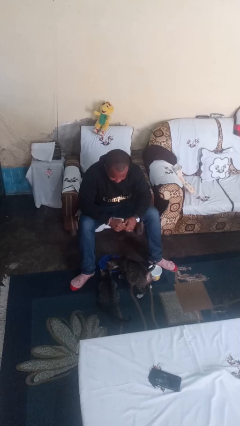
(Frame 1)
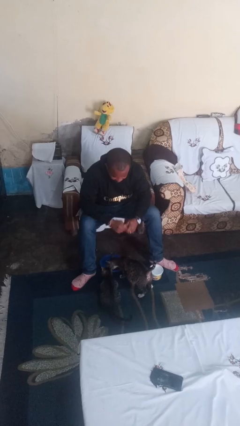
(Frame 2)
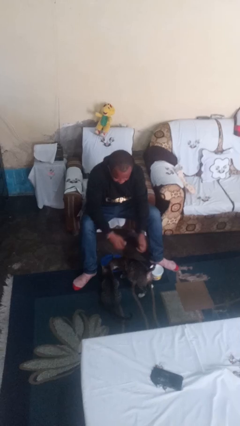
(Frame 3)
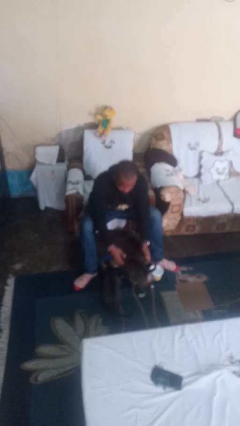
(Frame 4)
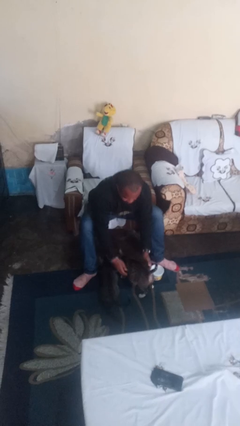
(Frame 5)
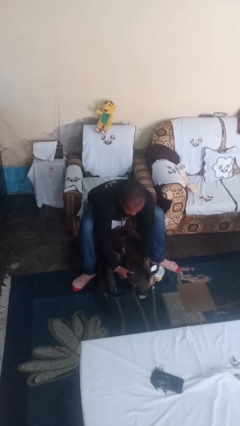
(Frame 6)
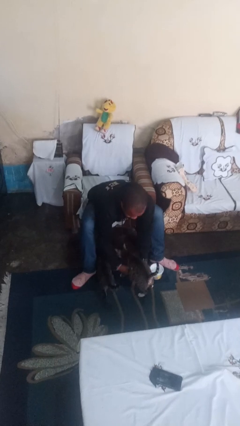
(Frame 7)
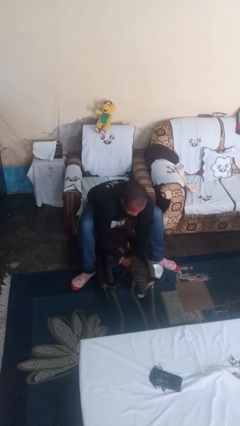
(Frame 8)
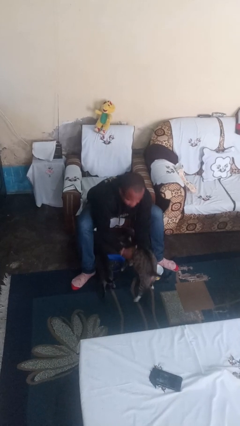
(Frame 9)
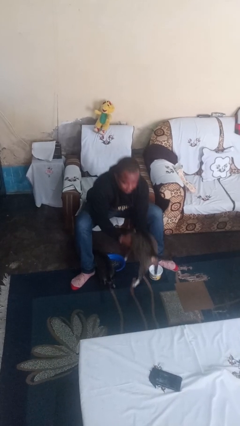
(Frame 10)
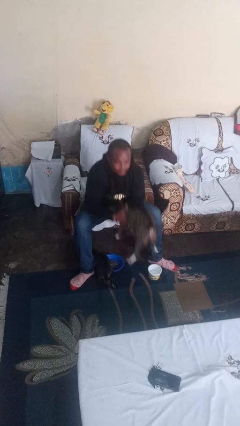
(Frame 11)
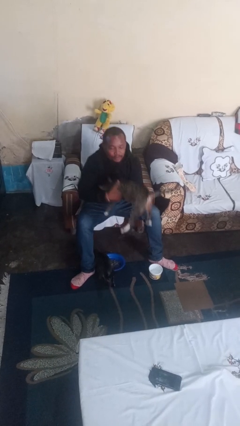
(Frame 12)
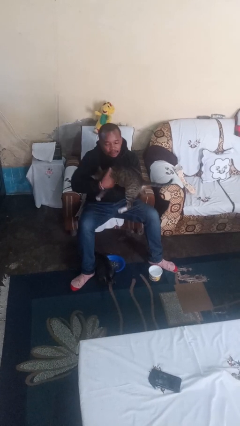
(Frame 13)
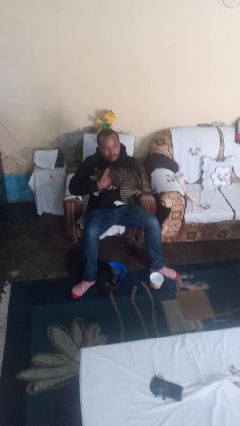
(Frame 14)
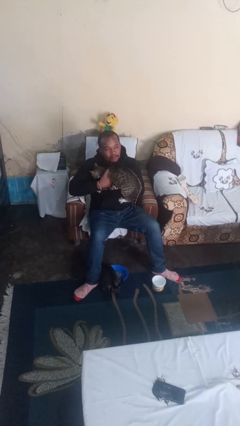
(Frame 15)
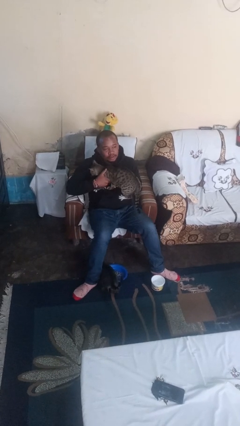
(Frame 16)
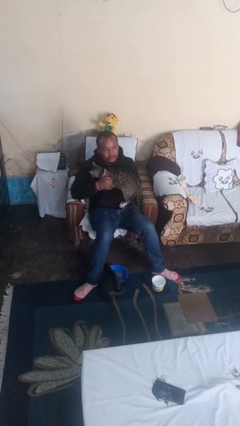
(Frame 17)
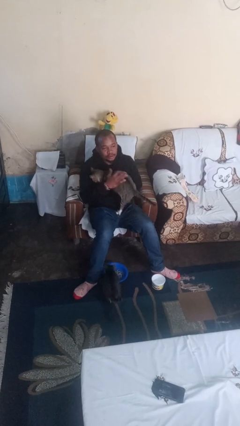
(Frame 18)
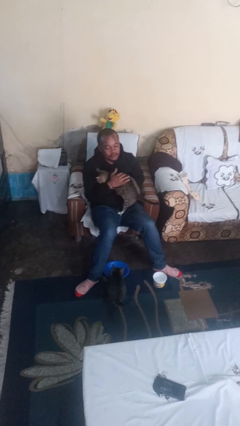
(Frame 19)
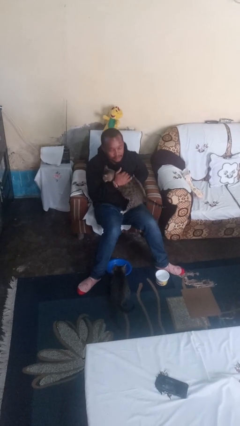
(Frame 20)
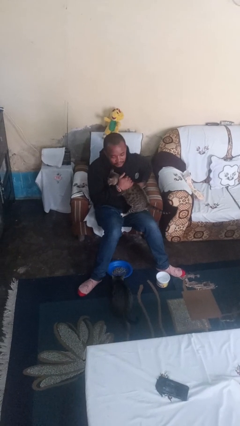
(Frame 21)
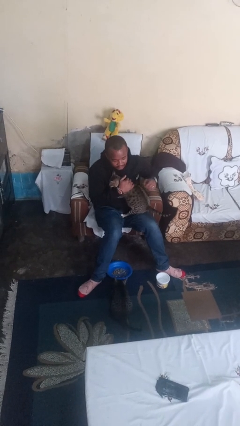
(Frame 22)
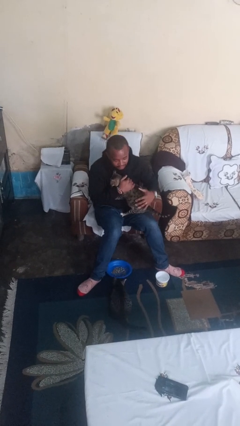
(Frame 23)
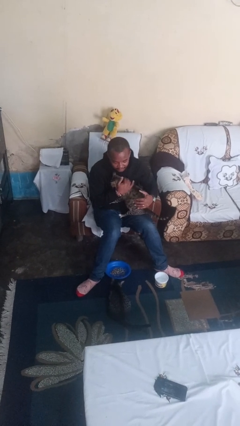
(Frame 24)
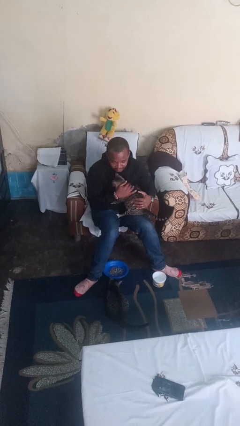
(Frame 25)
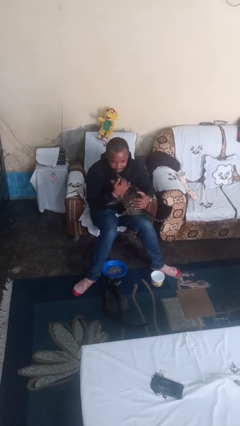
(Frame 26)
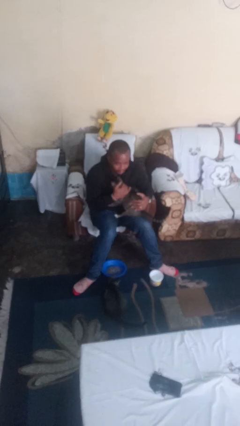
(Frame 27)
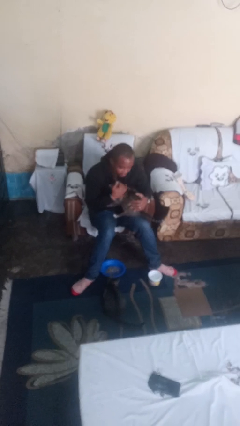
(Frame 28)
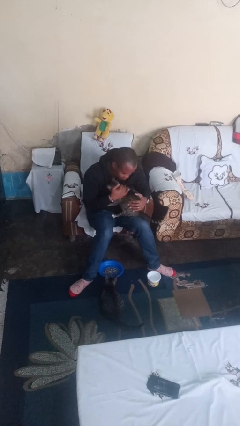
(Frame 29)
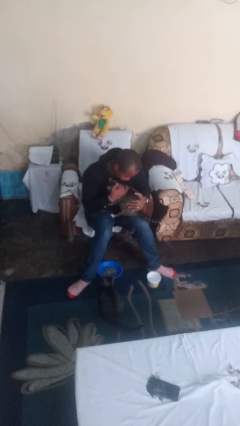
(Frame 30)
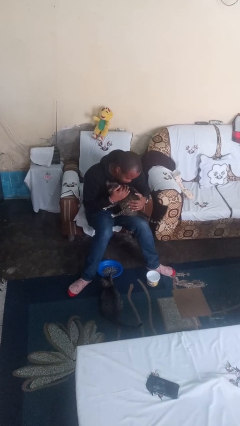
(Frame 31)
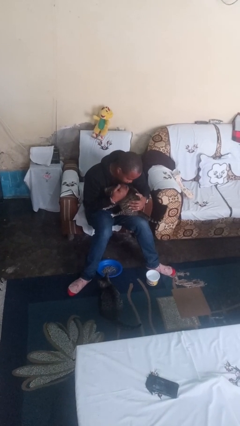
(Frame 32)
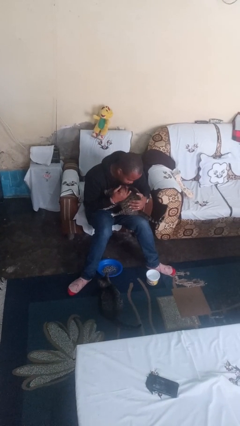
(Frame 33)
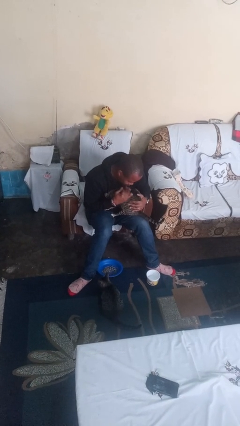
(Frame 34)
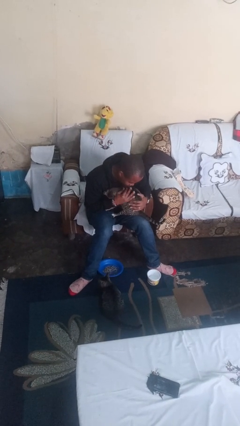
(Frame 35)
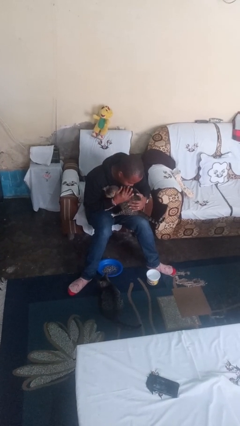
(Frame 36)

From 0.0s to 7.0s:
person hugs cat

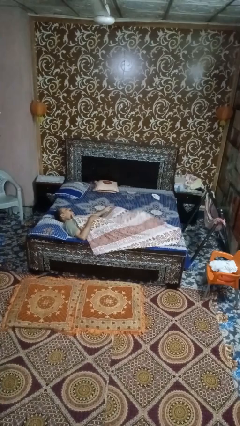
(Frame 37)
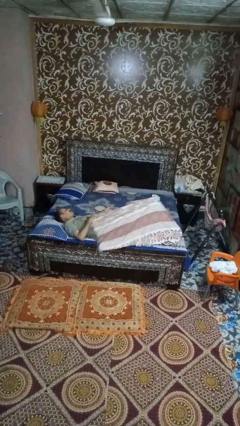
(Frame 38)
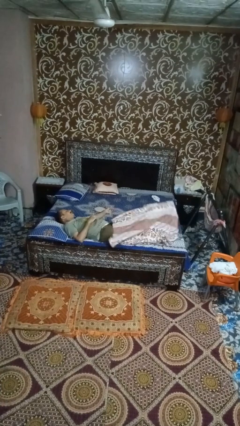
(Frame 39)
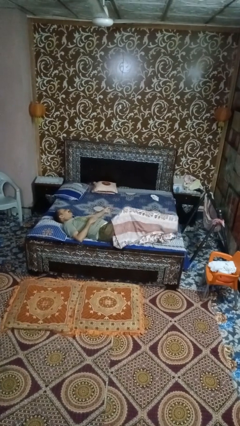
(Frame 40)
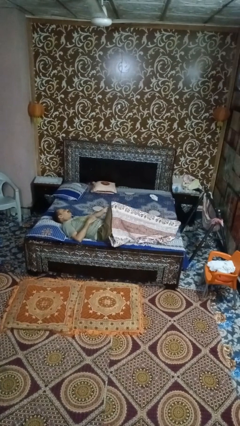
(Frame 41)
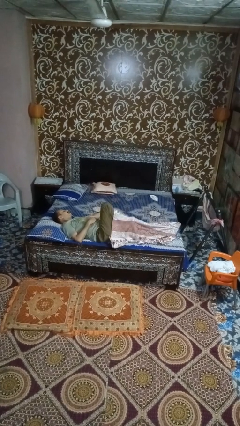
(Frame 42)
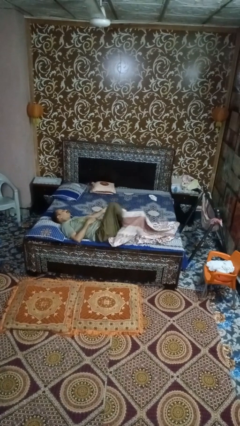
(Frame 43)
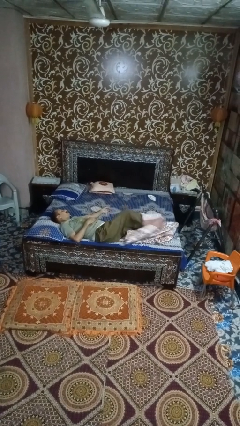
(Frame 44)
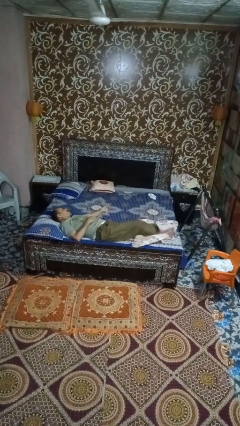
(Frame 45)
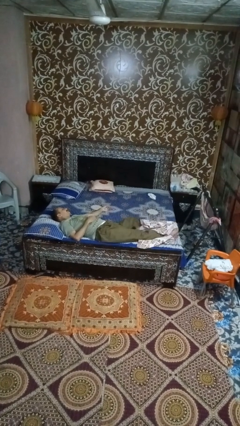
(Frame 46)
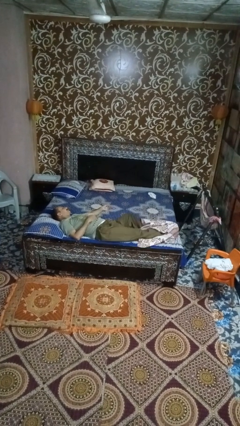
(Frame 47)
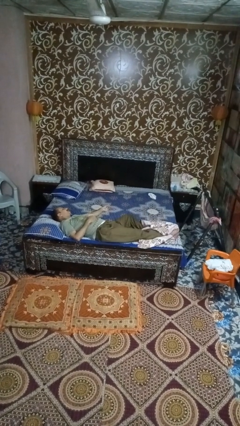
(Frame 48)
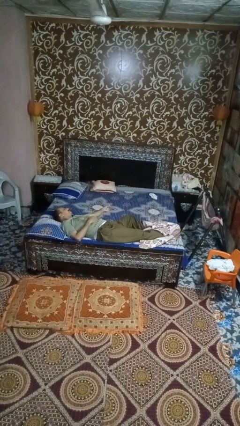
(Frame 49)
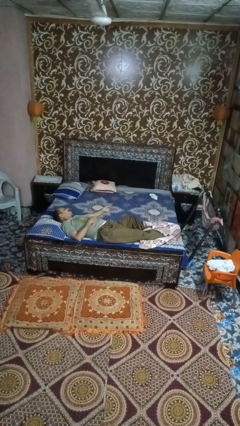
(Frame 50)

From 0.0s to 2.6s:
person uncovers with bedsheets

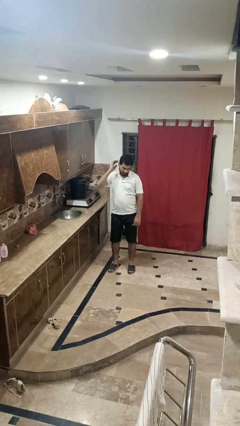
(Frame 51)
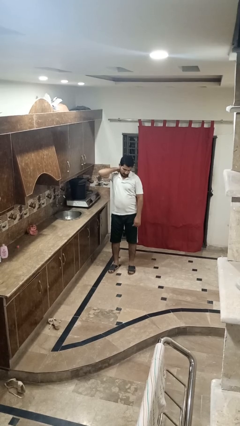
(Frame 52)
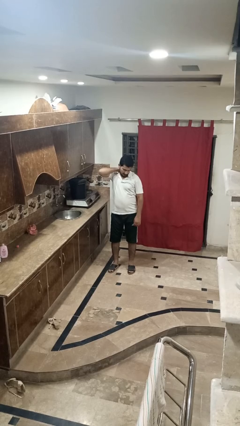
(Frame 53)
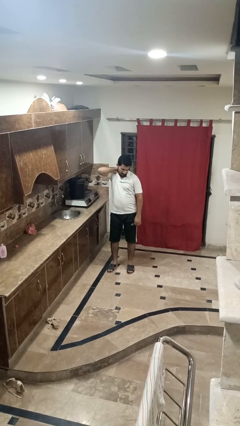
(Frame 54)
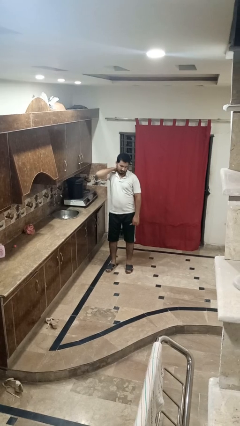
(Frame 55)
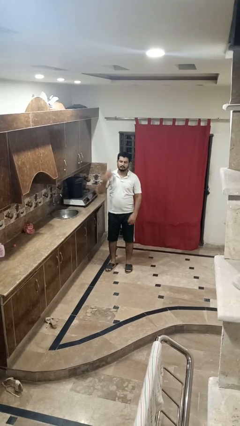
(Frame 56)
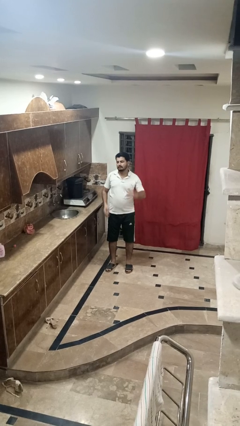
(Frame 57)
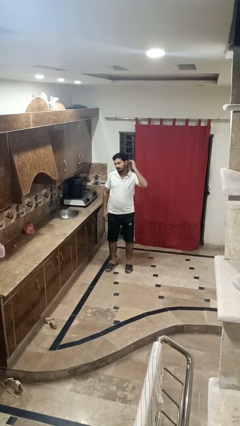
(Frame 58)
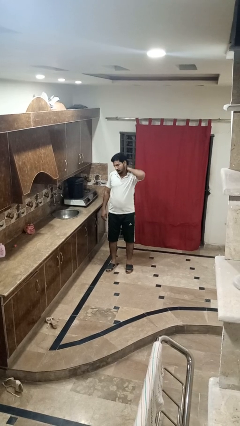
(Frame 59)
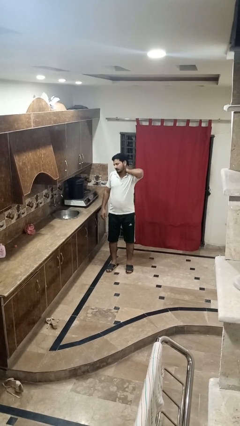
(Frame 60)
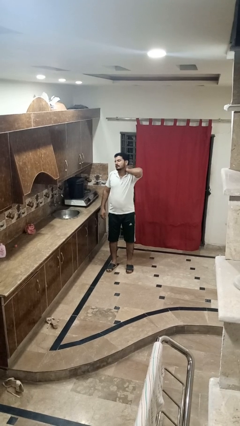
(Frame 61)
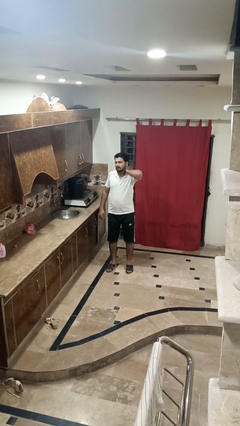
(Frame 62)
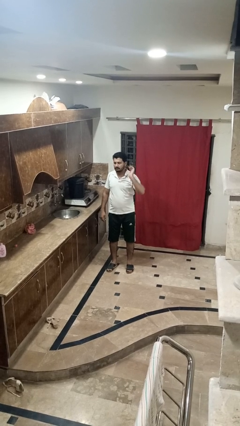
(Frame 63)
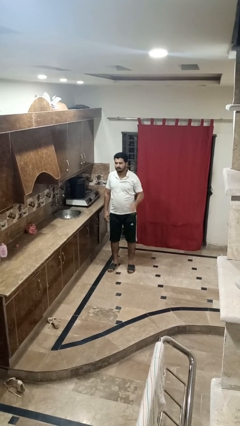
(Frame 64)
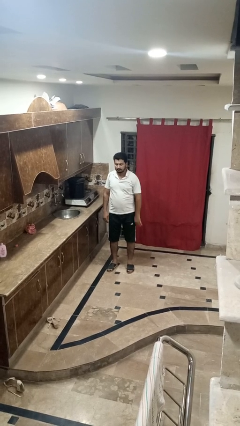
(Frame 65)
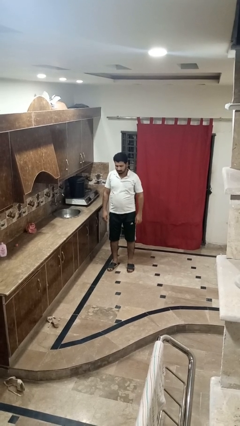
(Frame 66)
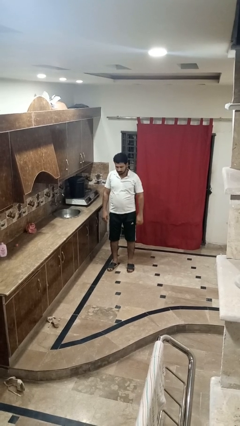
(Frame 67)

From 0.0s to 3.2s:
person rubs neck

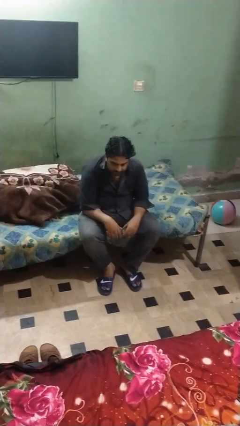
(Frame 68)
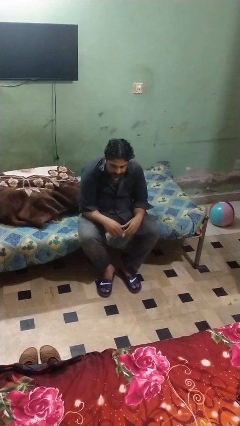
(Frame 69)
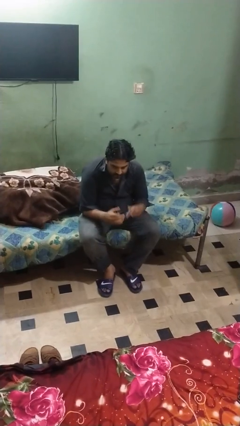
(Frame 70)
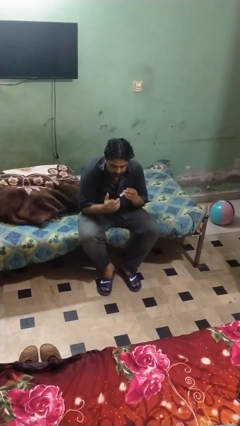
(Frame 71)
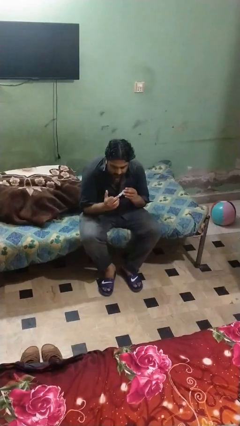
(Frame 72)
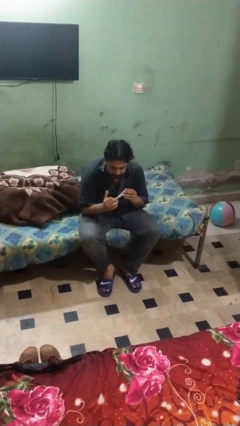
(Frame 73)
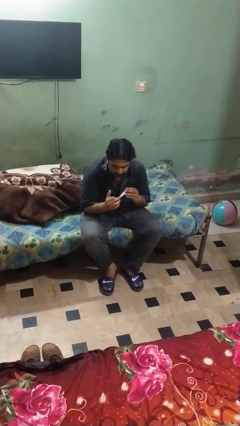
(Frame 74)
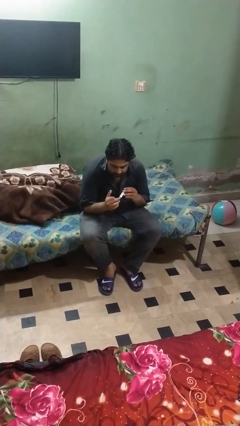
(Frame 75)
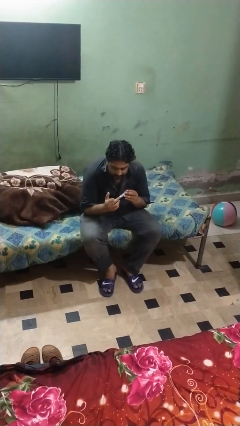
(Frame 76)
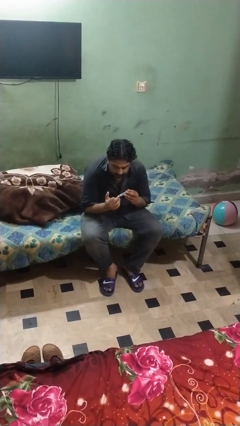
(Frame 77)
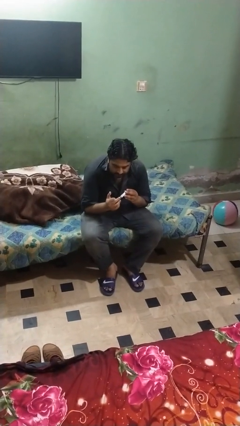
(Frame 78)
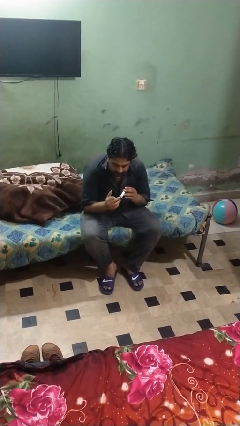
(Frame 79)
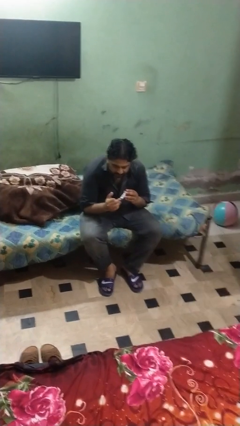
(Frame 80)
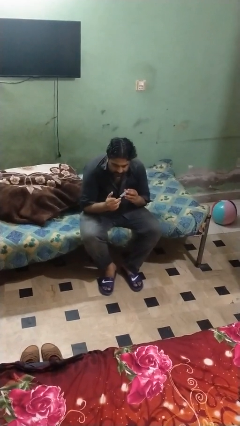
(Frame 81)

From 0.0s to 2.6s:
person clips fingernails

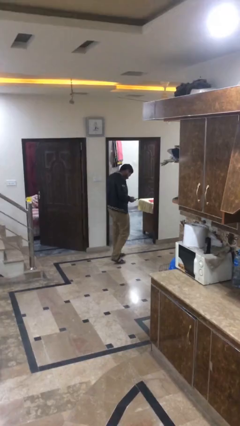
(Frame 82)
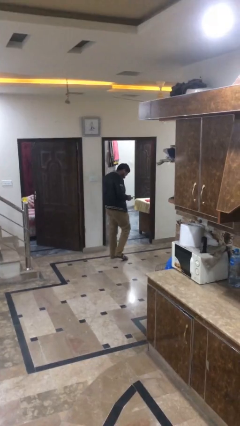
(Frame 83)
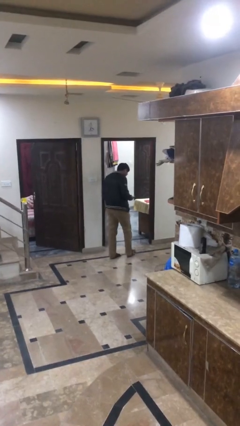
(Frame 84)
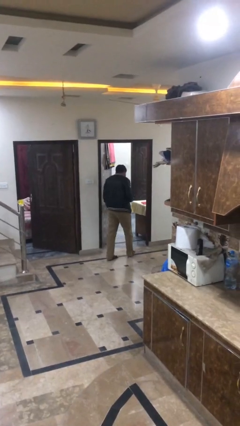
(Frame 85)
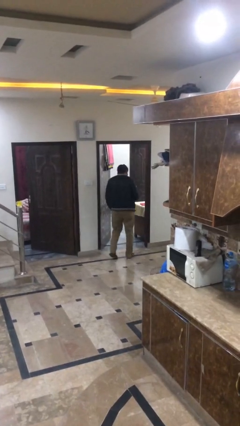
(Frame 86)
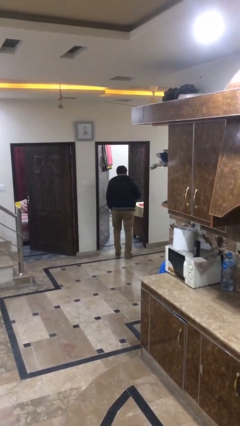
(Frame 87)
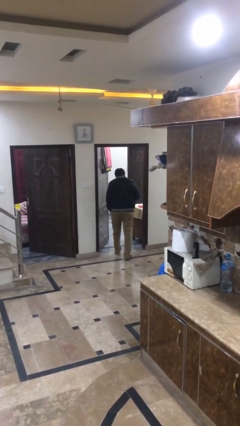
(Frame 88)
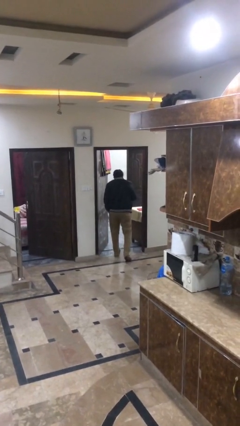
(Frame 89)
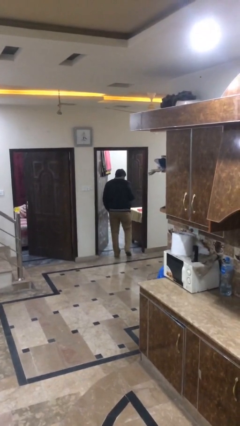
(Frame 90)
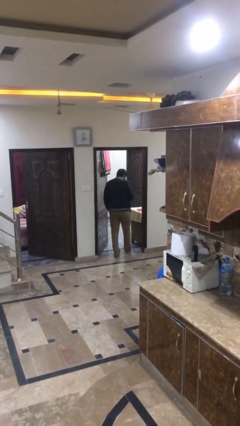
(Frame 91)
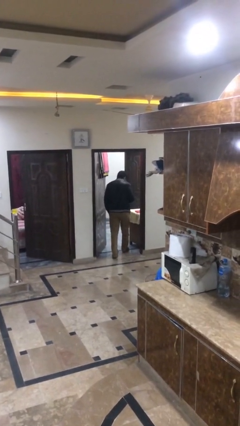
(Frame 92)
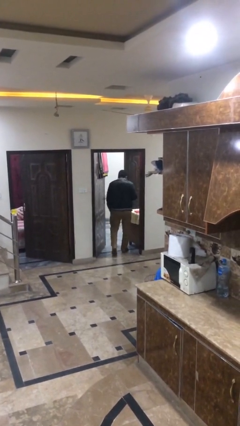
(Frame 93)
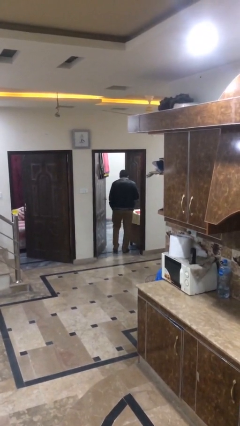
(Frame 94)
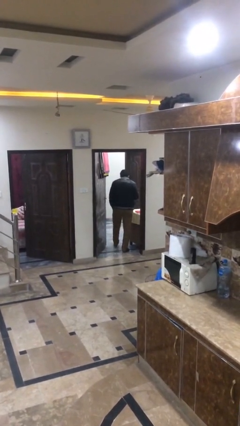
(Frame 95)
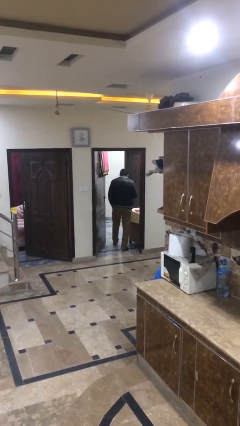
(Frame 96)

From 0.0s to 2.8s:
person enters scene through structure
